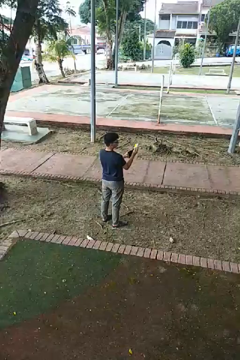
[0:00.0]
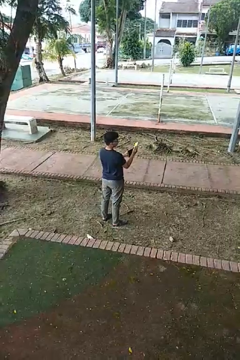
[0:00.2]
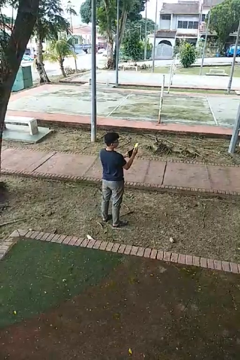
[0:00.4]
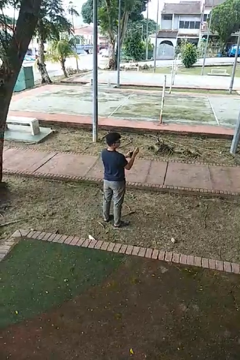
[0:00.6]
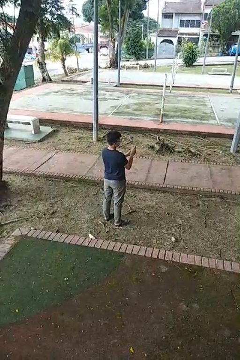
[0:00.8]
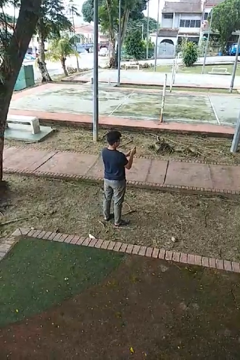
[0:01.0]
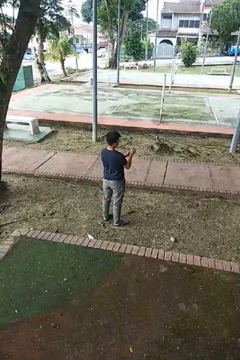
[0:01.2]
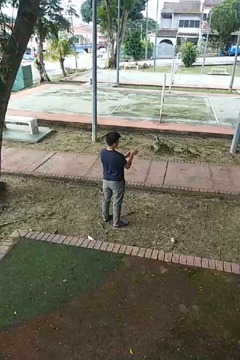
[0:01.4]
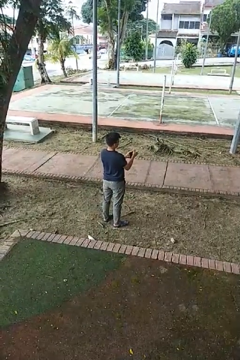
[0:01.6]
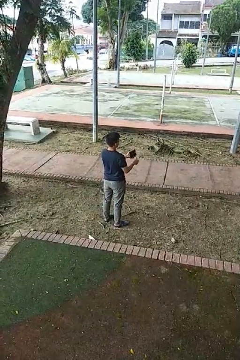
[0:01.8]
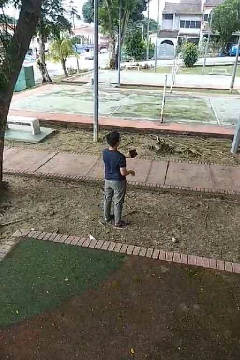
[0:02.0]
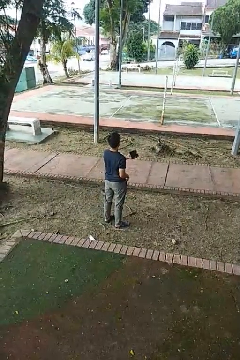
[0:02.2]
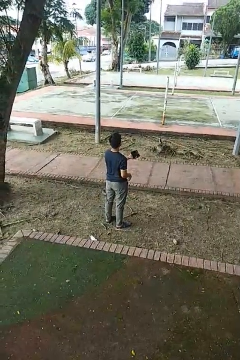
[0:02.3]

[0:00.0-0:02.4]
person puts object into purse

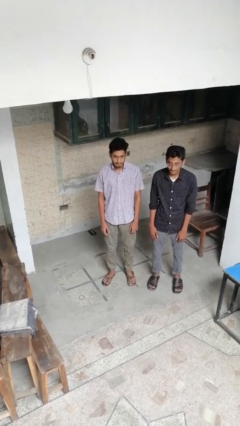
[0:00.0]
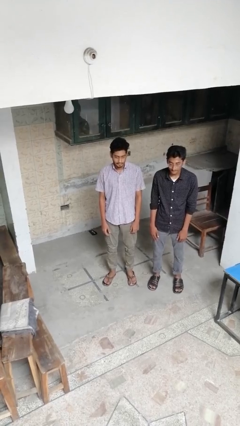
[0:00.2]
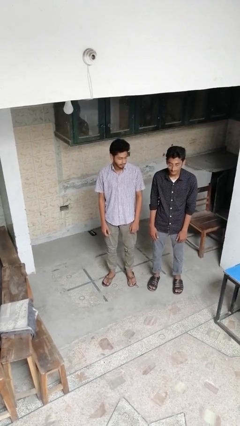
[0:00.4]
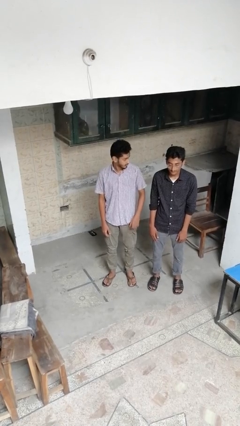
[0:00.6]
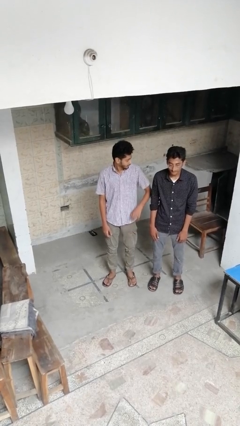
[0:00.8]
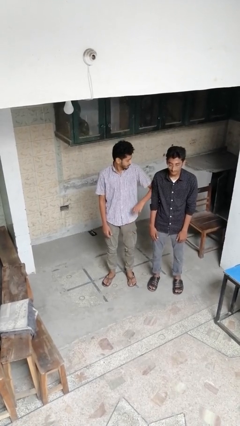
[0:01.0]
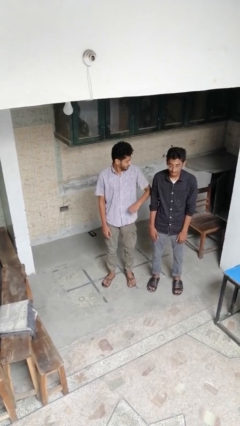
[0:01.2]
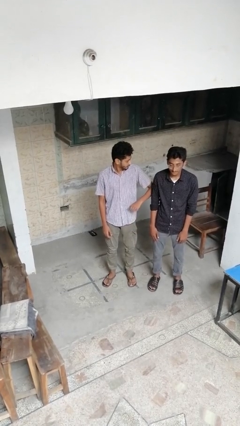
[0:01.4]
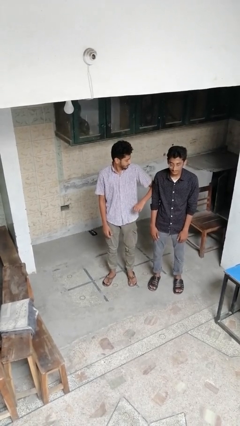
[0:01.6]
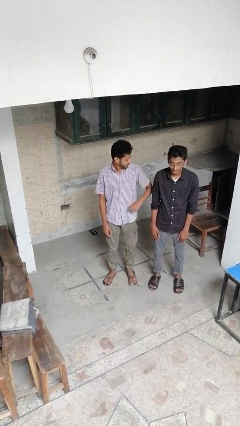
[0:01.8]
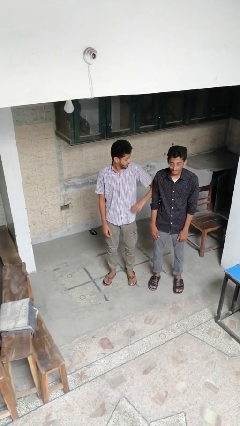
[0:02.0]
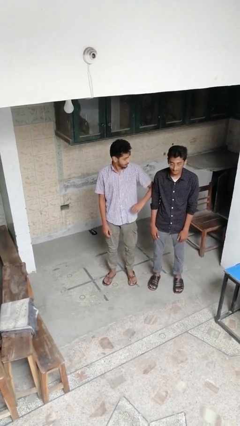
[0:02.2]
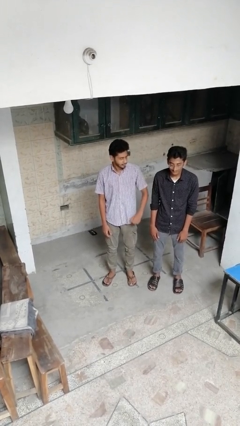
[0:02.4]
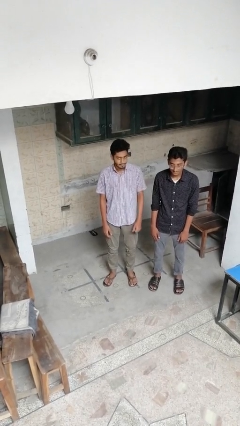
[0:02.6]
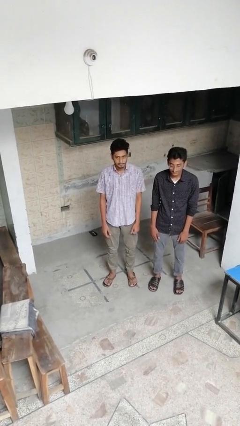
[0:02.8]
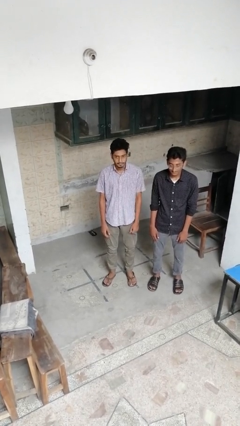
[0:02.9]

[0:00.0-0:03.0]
person nudges person with elbow

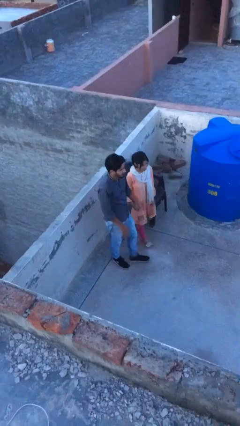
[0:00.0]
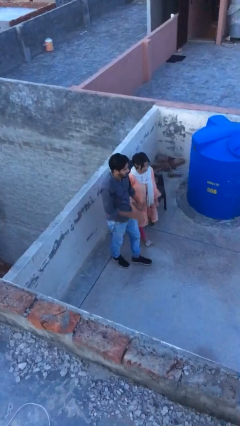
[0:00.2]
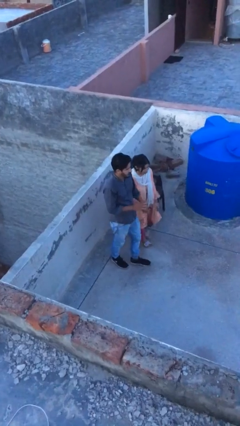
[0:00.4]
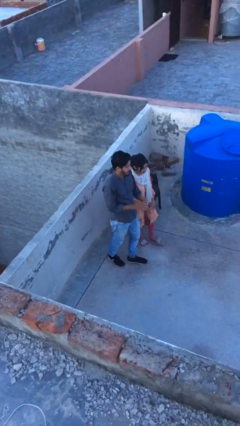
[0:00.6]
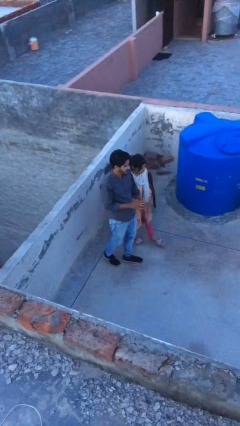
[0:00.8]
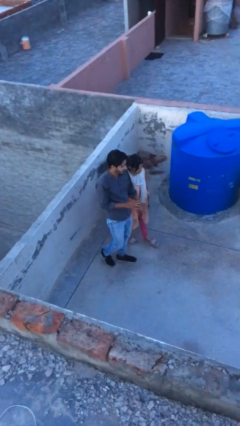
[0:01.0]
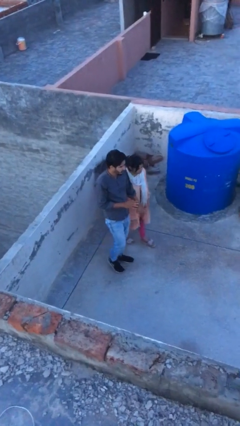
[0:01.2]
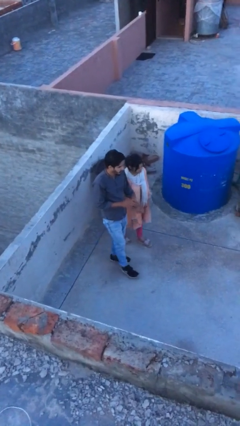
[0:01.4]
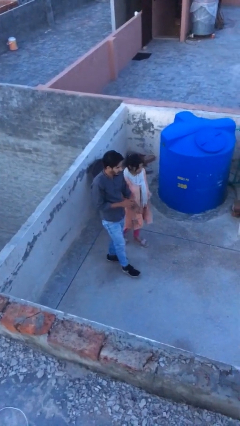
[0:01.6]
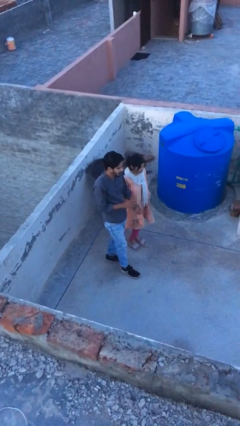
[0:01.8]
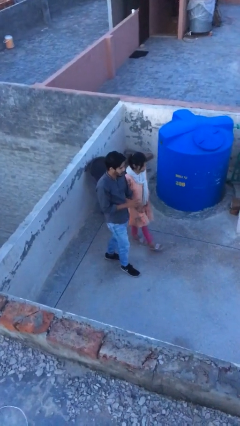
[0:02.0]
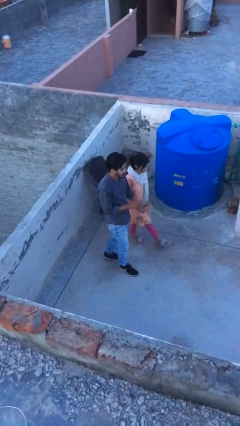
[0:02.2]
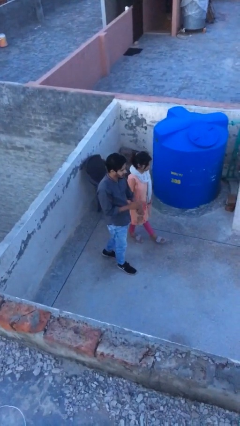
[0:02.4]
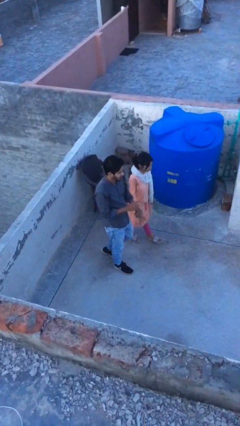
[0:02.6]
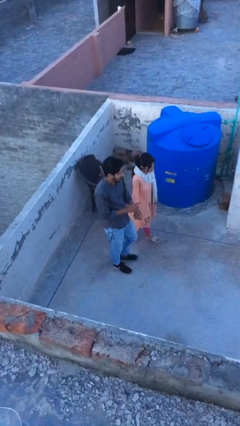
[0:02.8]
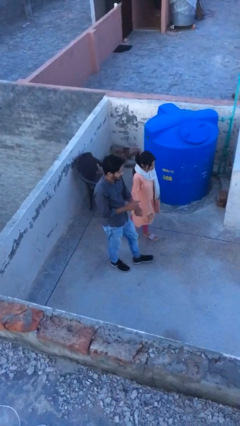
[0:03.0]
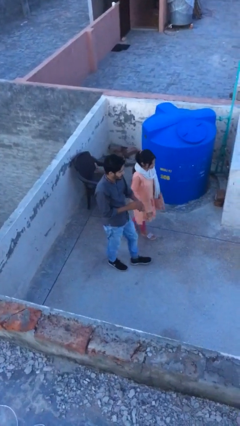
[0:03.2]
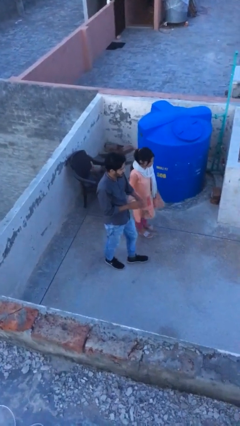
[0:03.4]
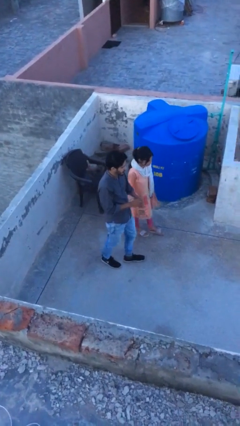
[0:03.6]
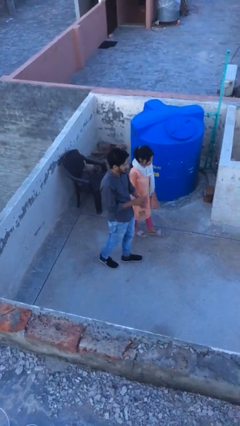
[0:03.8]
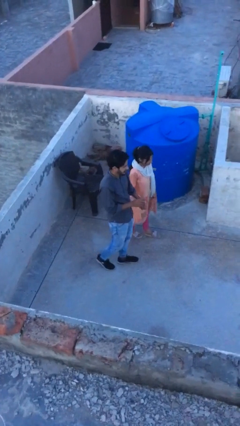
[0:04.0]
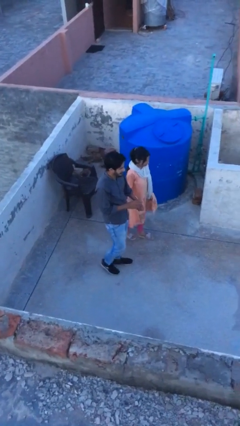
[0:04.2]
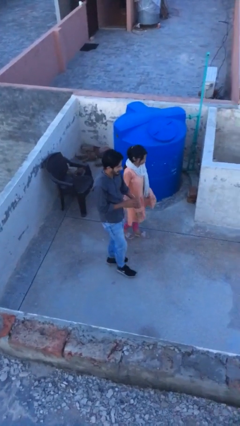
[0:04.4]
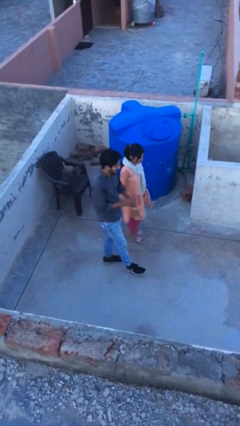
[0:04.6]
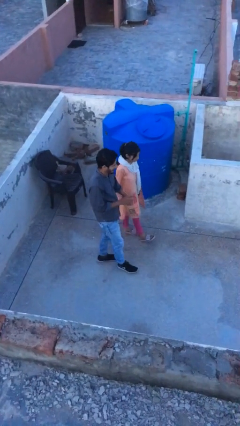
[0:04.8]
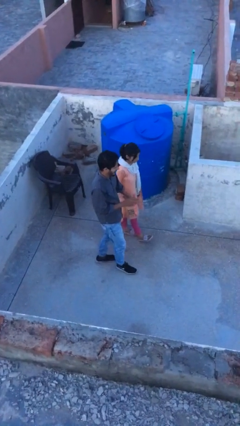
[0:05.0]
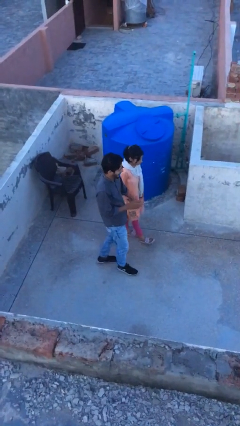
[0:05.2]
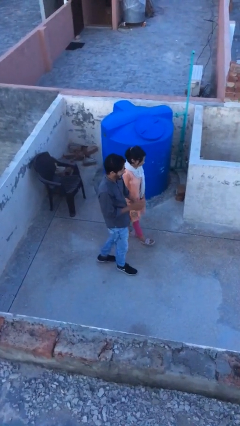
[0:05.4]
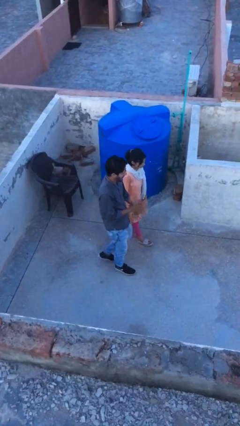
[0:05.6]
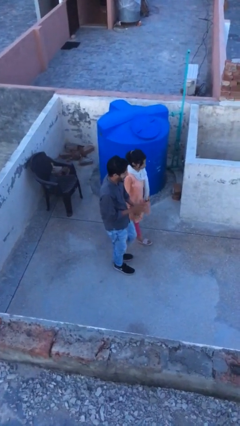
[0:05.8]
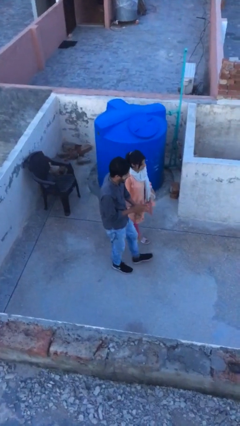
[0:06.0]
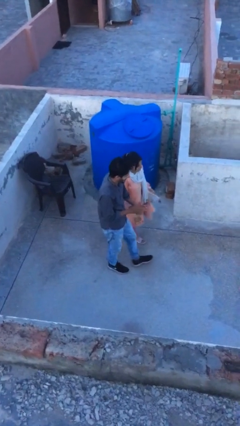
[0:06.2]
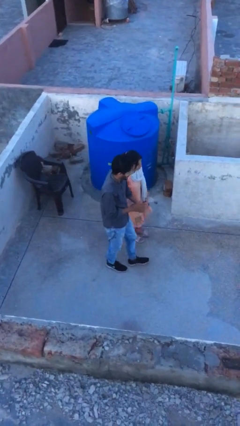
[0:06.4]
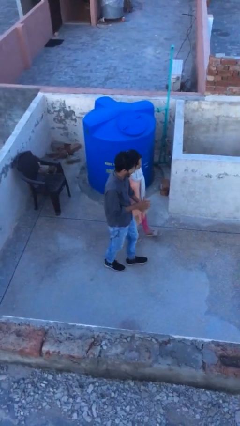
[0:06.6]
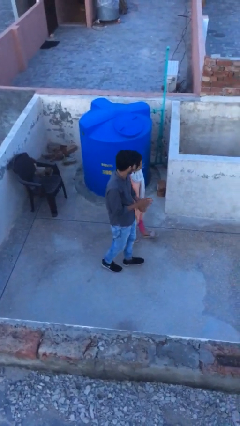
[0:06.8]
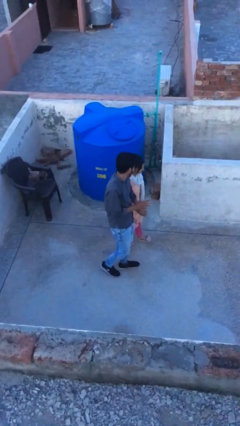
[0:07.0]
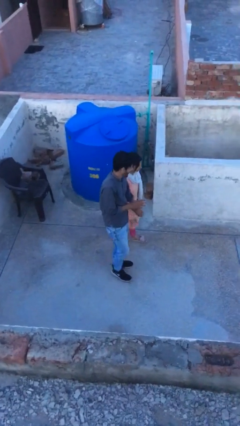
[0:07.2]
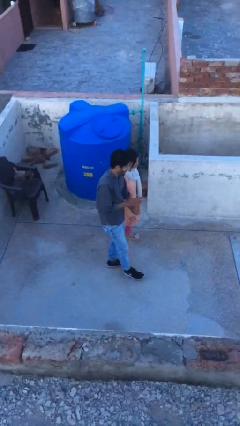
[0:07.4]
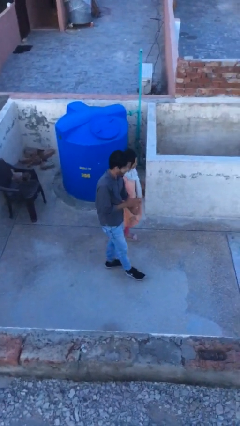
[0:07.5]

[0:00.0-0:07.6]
person holds hand

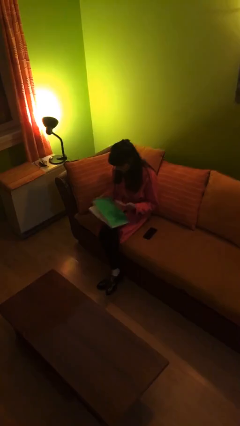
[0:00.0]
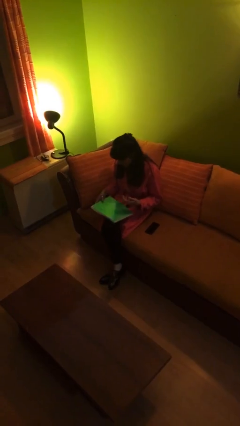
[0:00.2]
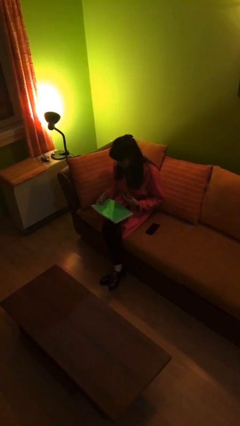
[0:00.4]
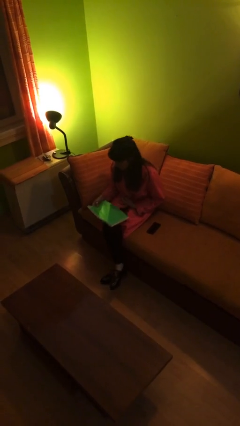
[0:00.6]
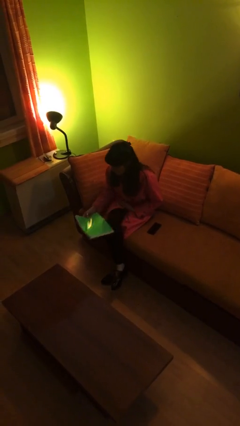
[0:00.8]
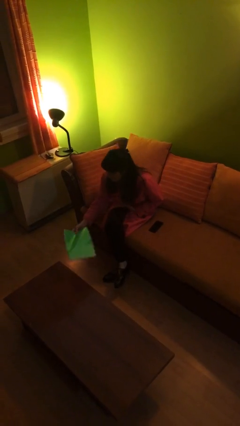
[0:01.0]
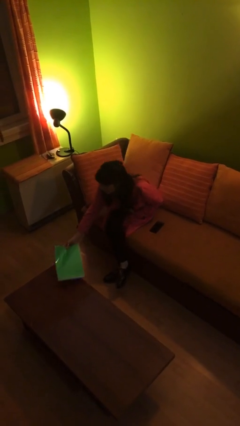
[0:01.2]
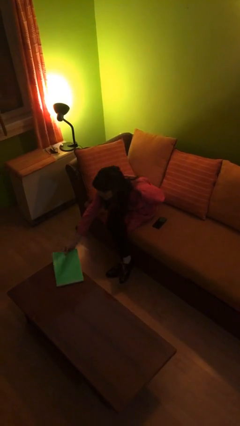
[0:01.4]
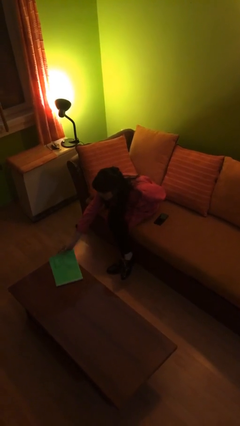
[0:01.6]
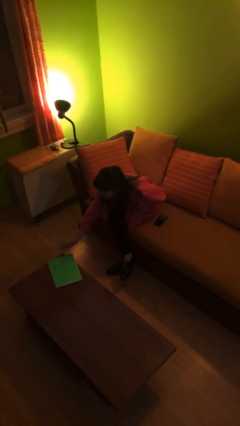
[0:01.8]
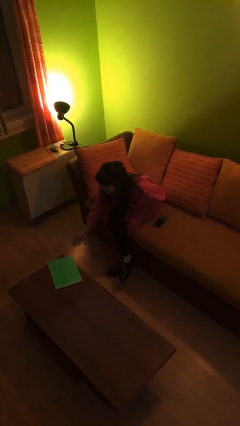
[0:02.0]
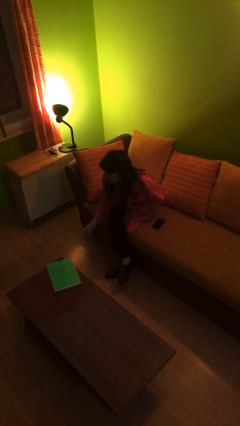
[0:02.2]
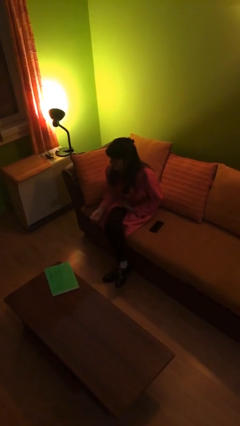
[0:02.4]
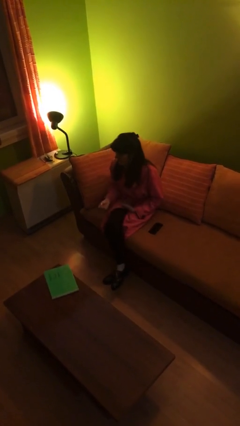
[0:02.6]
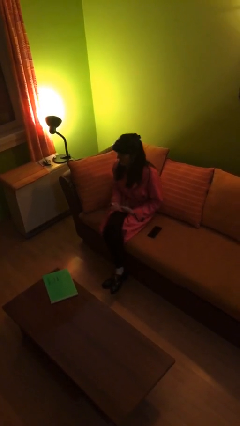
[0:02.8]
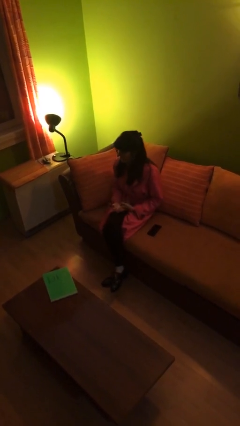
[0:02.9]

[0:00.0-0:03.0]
person puts down object on table

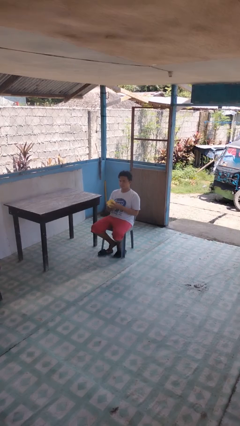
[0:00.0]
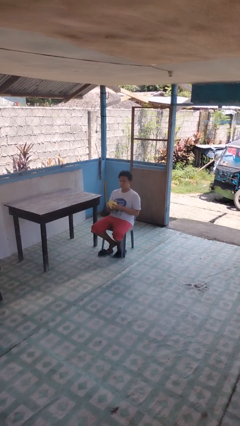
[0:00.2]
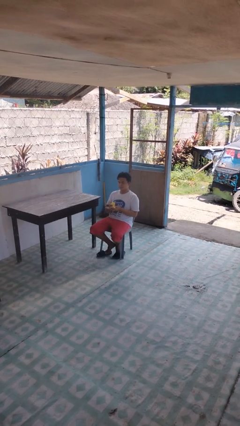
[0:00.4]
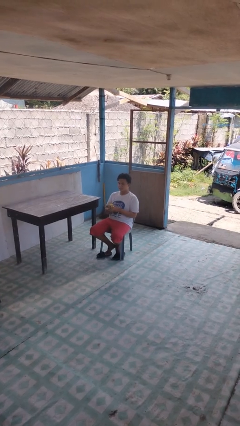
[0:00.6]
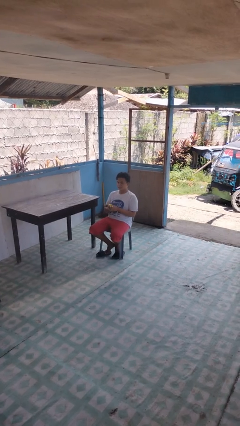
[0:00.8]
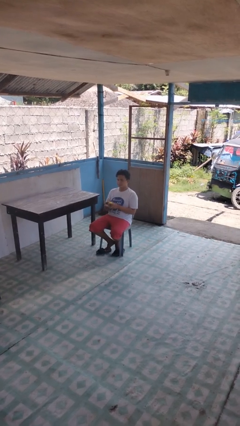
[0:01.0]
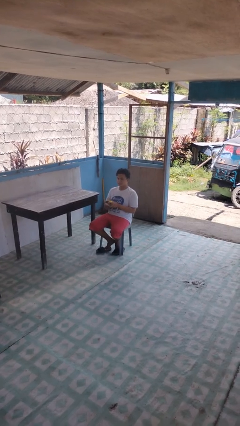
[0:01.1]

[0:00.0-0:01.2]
person crumples paper

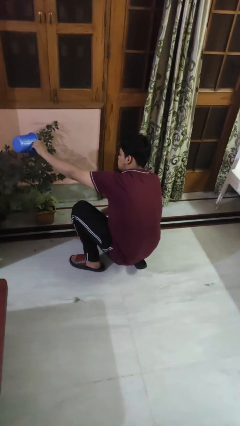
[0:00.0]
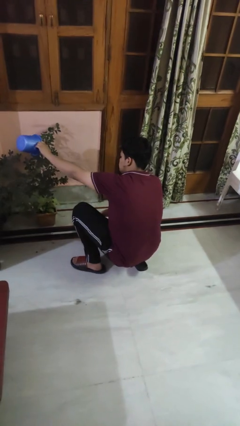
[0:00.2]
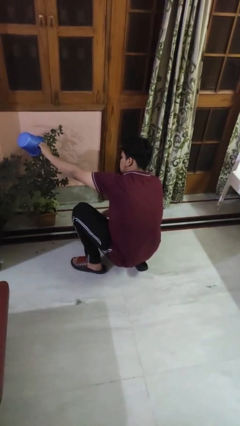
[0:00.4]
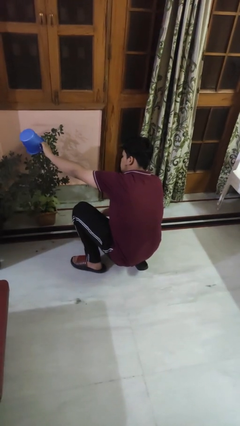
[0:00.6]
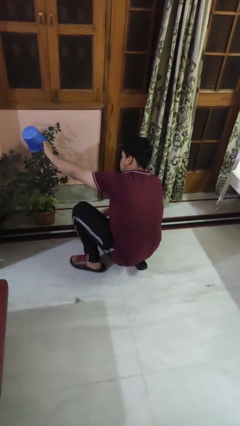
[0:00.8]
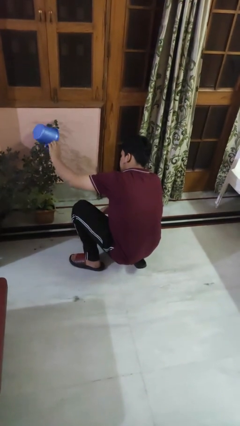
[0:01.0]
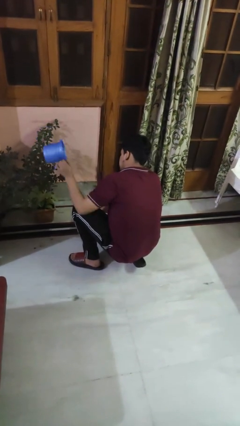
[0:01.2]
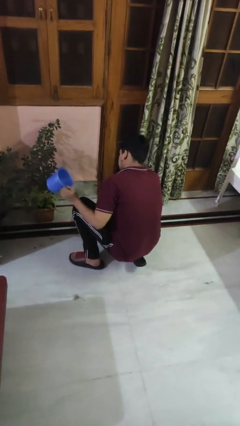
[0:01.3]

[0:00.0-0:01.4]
person waters houseplant
